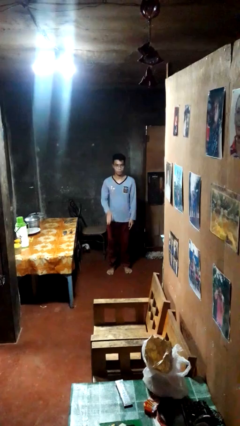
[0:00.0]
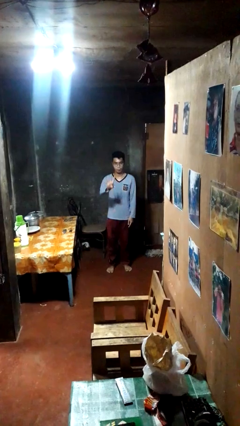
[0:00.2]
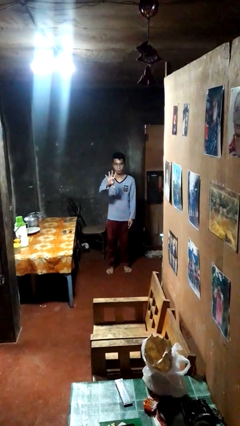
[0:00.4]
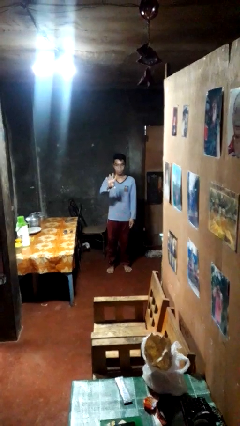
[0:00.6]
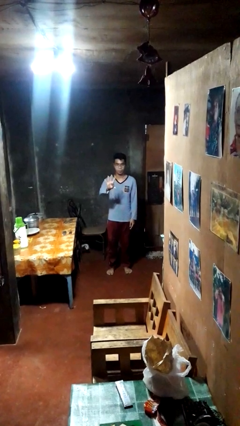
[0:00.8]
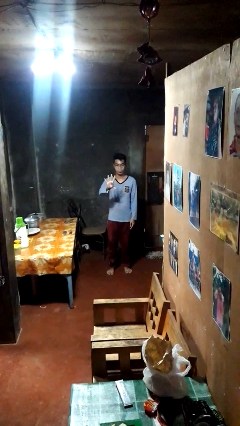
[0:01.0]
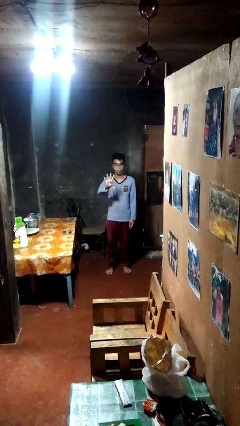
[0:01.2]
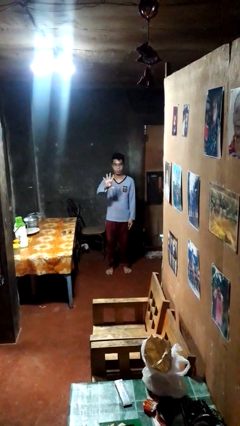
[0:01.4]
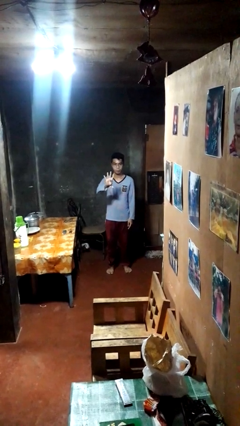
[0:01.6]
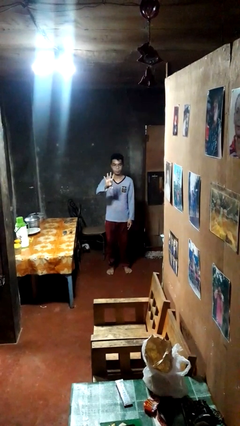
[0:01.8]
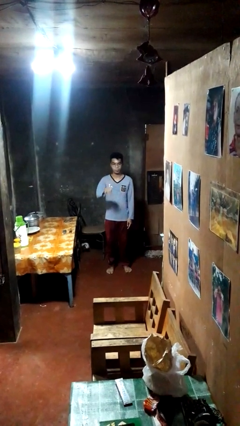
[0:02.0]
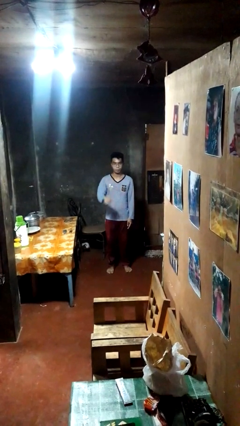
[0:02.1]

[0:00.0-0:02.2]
person gestures number four

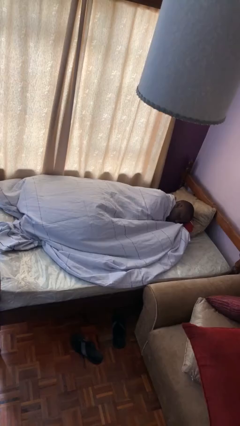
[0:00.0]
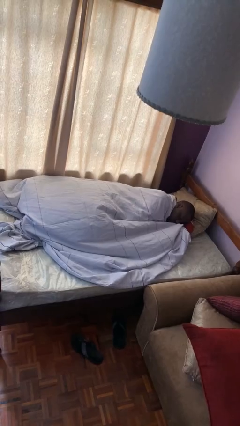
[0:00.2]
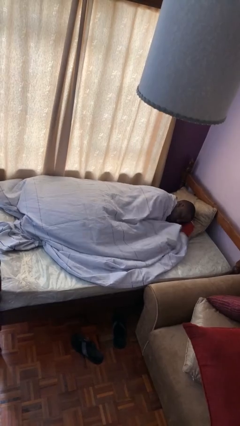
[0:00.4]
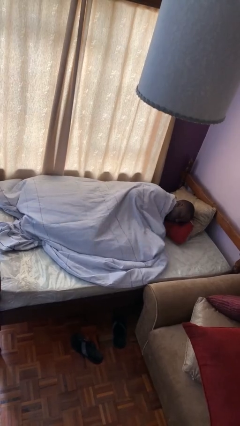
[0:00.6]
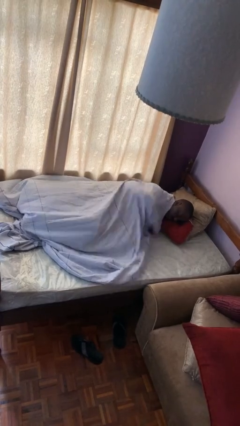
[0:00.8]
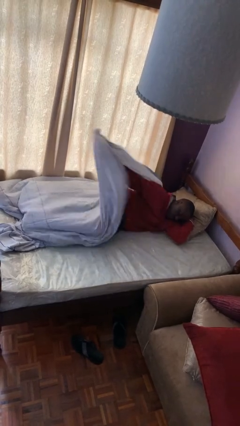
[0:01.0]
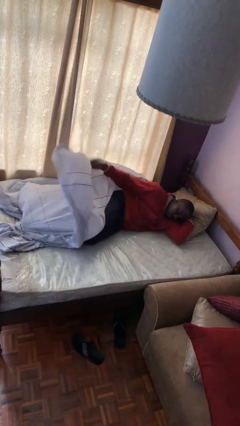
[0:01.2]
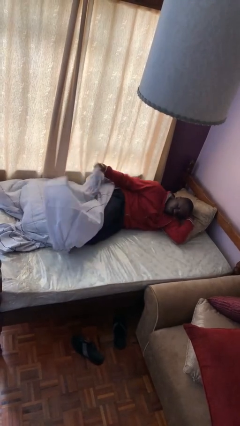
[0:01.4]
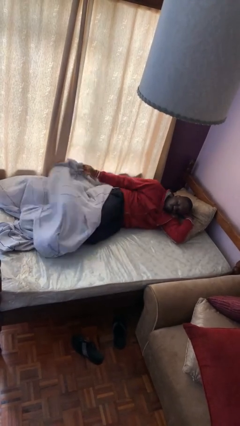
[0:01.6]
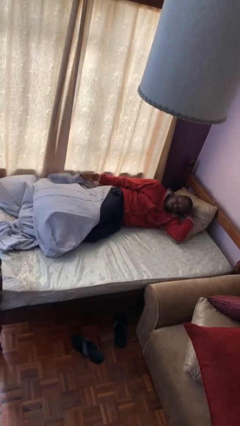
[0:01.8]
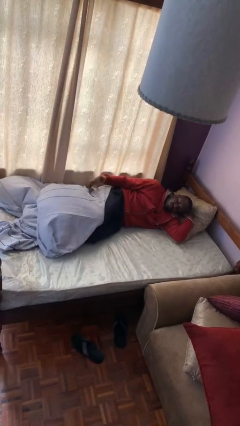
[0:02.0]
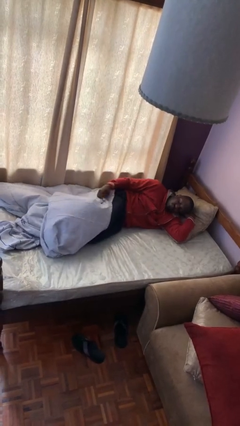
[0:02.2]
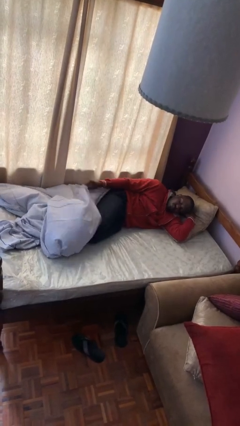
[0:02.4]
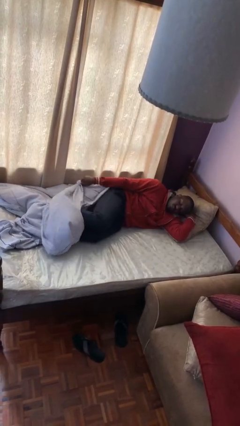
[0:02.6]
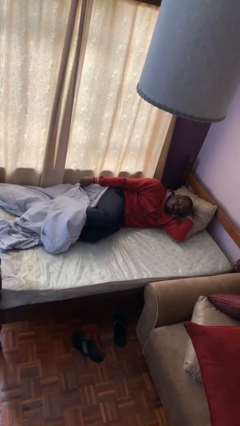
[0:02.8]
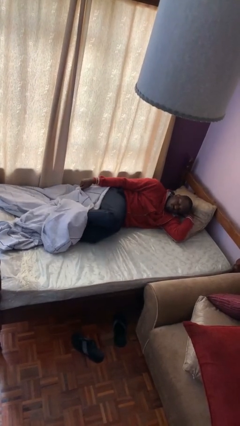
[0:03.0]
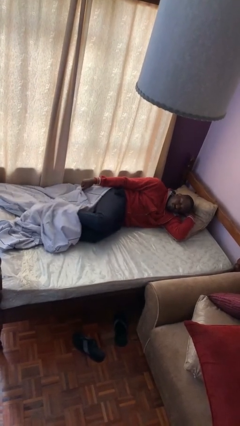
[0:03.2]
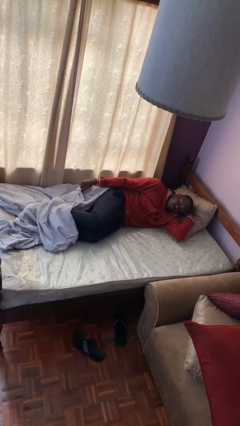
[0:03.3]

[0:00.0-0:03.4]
person uncovers with bedsheets

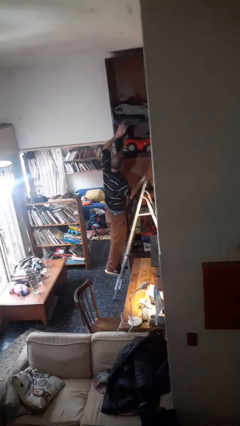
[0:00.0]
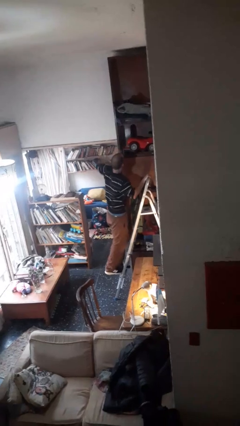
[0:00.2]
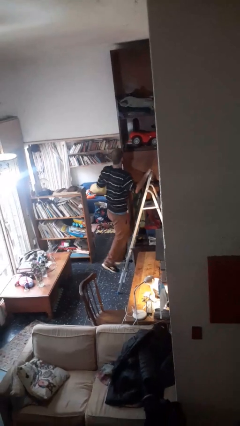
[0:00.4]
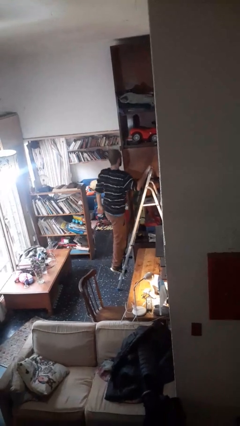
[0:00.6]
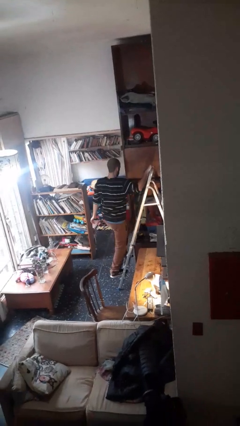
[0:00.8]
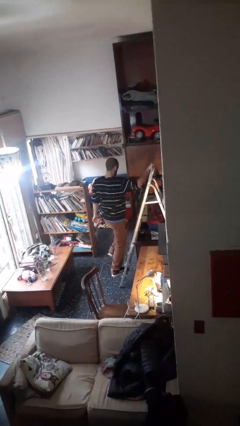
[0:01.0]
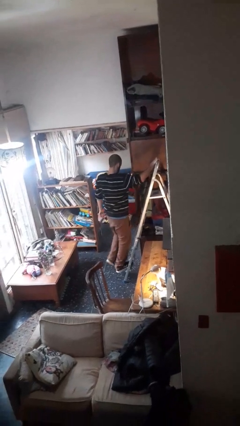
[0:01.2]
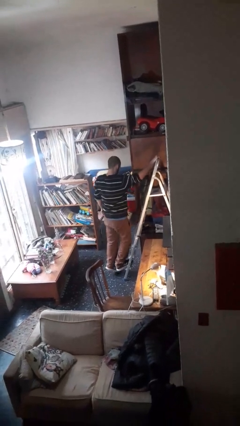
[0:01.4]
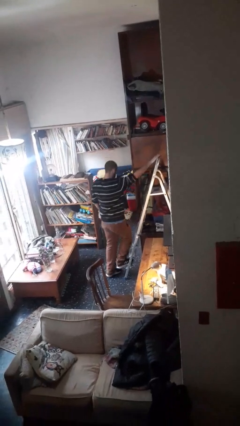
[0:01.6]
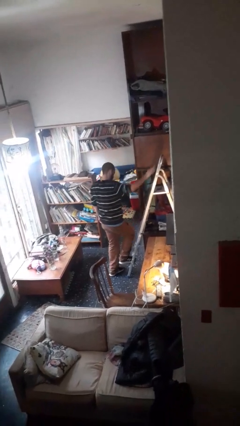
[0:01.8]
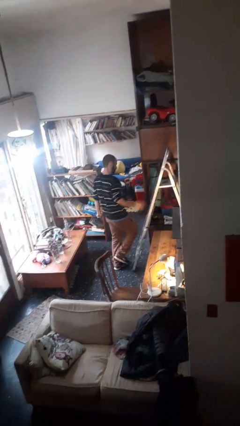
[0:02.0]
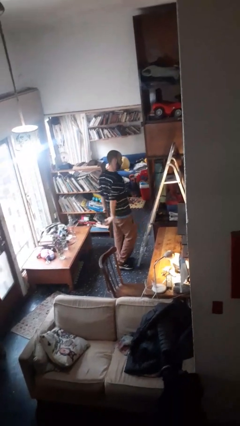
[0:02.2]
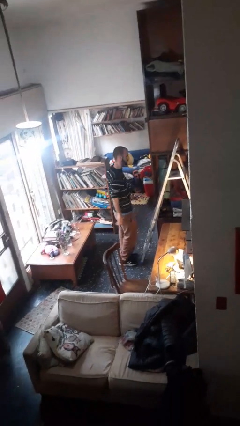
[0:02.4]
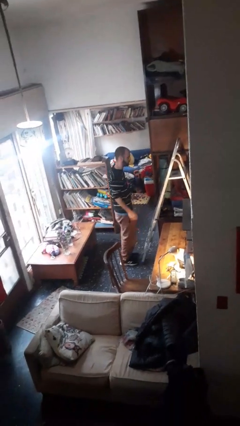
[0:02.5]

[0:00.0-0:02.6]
person climbs down ladder

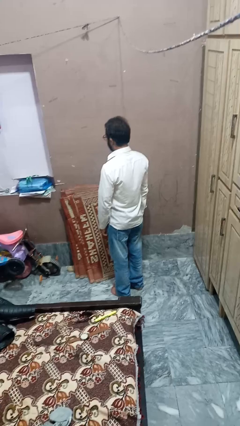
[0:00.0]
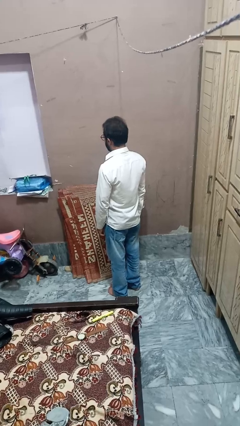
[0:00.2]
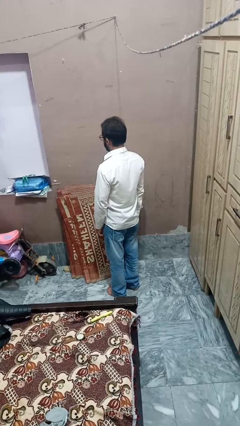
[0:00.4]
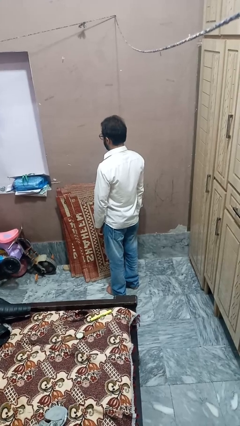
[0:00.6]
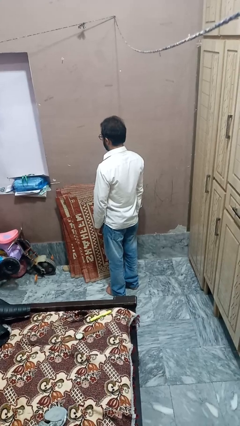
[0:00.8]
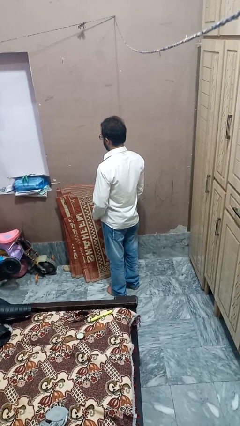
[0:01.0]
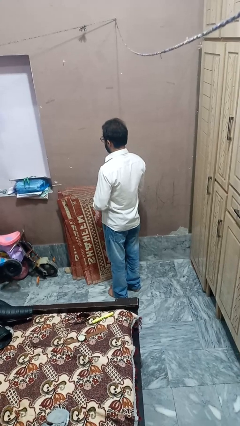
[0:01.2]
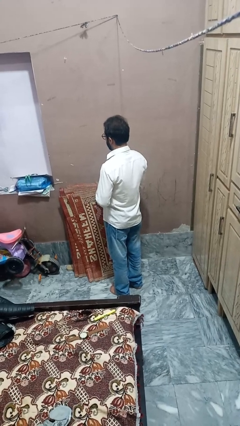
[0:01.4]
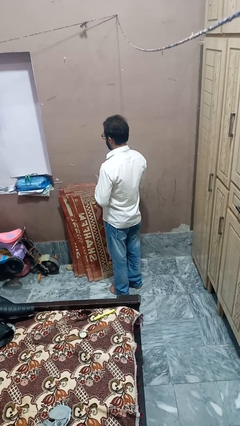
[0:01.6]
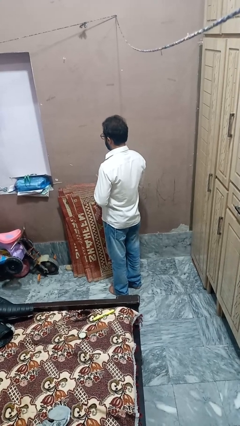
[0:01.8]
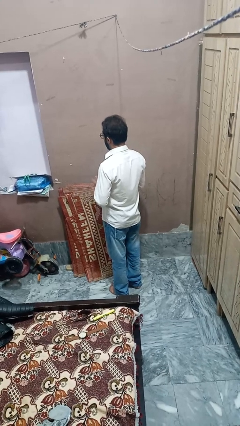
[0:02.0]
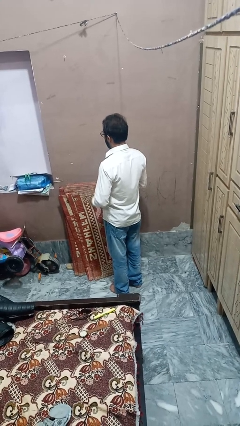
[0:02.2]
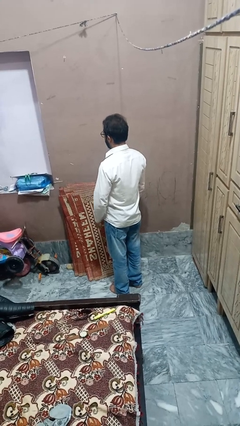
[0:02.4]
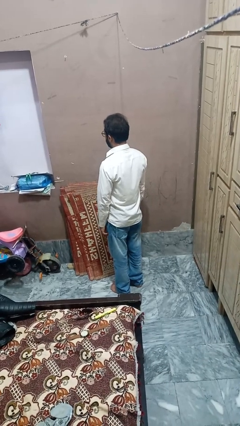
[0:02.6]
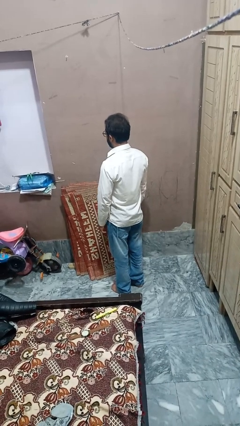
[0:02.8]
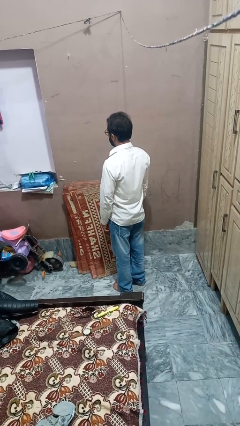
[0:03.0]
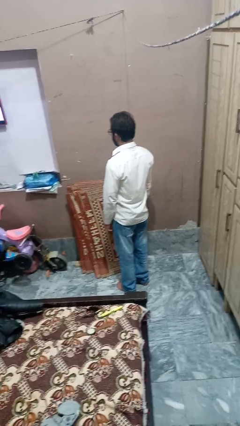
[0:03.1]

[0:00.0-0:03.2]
person takes off ring

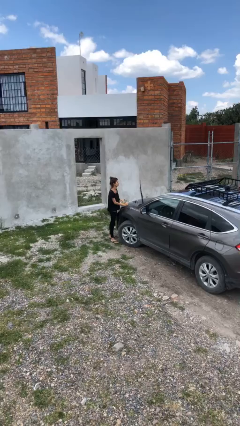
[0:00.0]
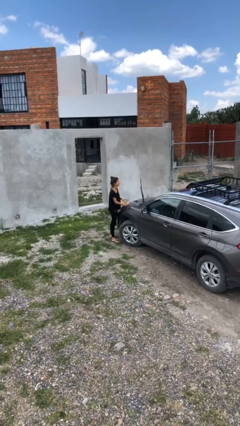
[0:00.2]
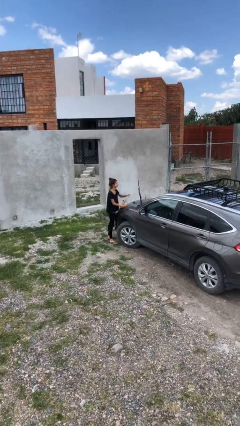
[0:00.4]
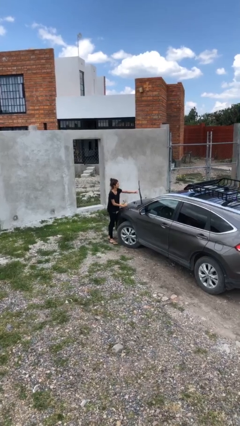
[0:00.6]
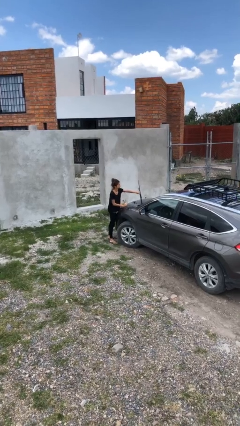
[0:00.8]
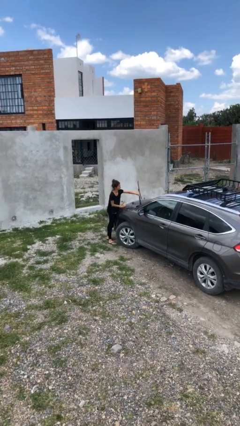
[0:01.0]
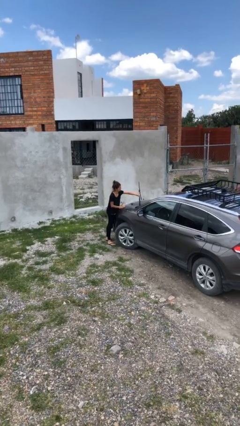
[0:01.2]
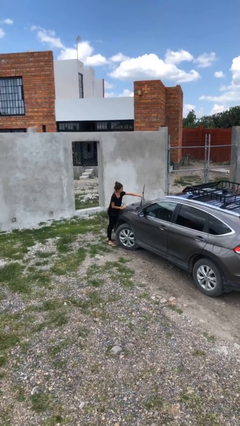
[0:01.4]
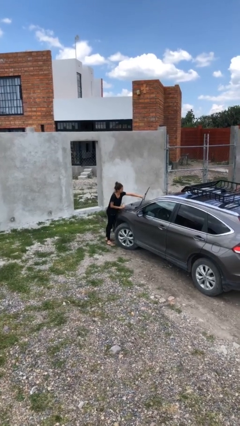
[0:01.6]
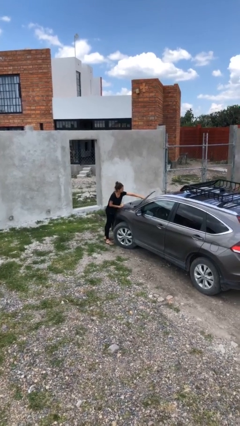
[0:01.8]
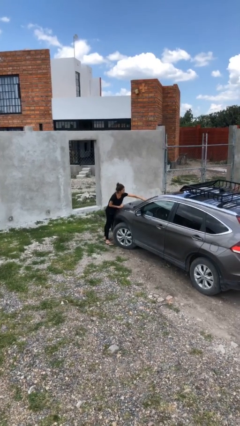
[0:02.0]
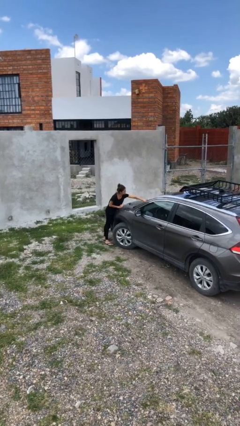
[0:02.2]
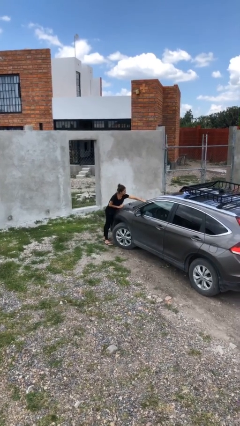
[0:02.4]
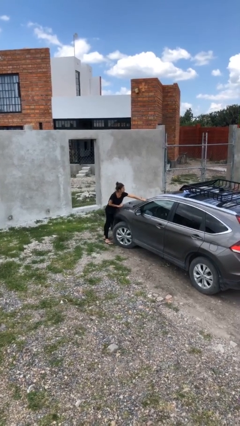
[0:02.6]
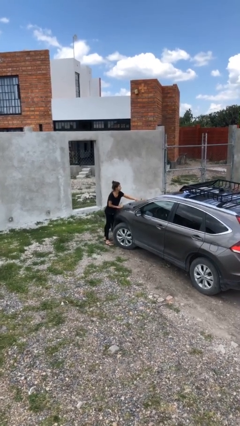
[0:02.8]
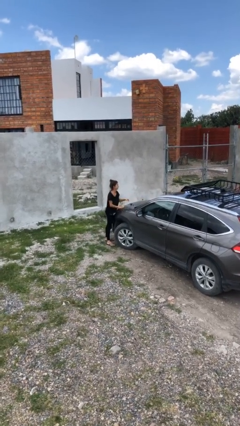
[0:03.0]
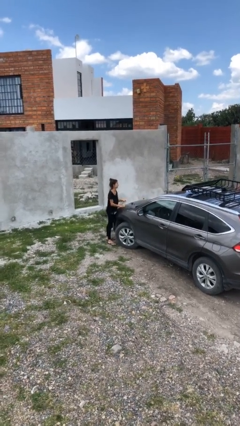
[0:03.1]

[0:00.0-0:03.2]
person flips down car wipers

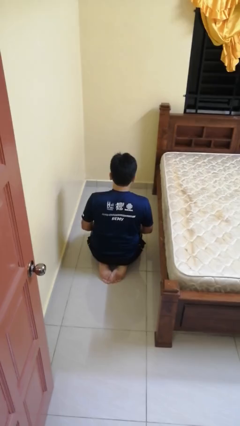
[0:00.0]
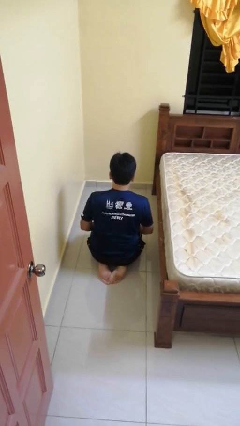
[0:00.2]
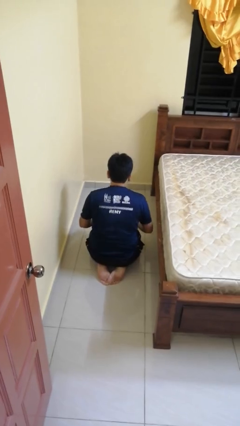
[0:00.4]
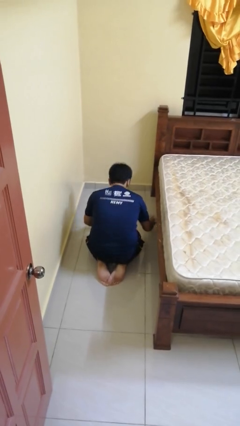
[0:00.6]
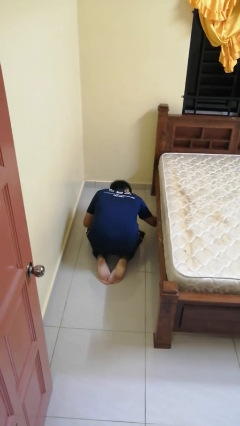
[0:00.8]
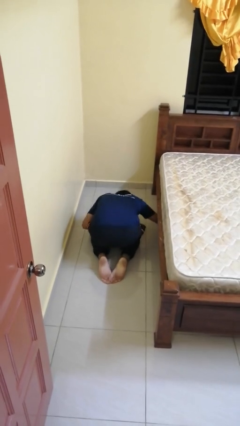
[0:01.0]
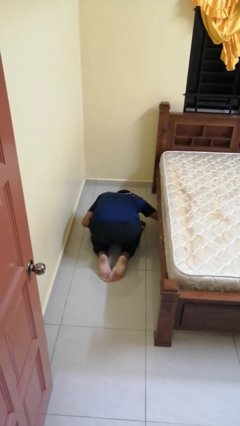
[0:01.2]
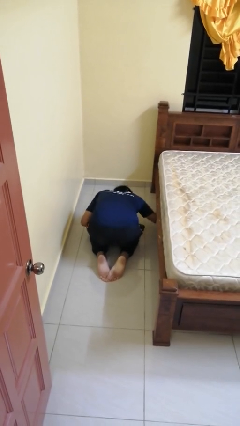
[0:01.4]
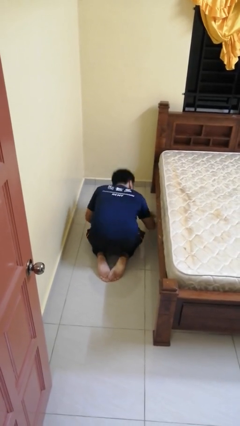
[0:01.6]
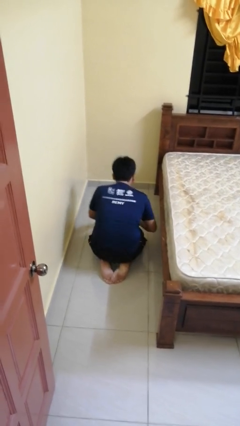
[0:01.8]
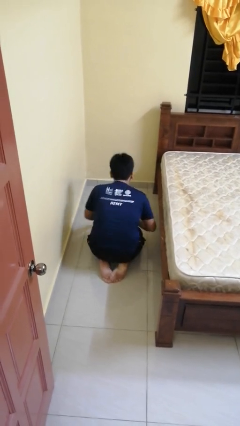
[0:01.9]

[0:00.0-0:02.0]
person searches under bed

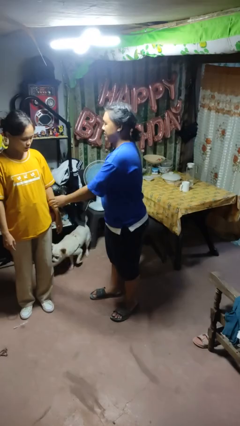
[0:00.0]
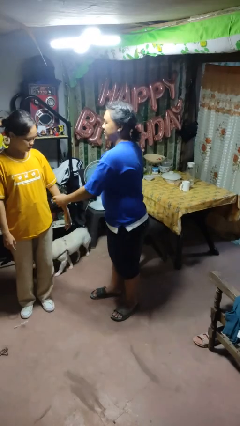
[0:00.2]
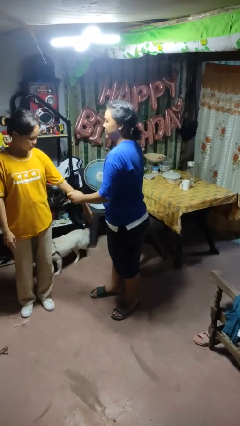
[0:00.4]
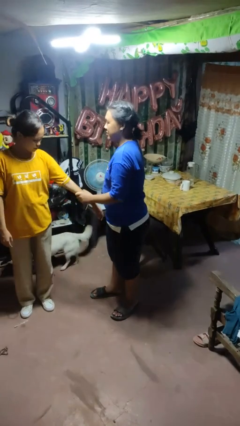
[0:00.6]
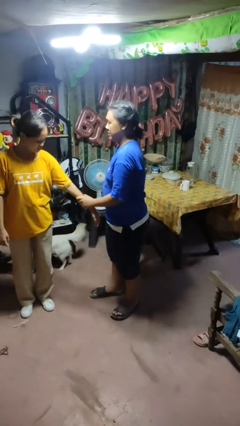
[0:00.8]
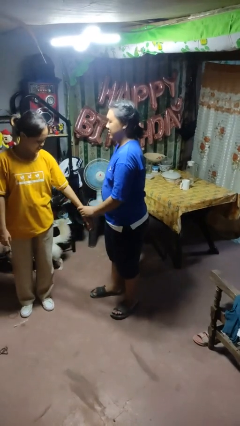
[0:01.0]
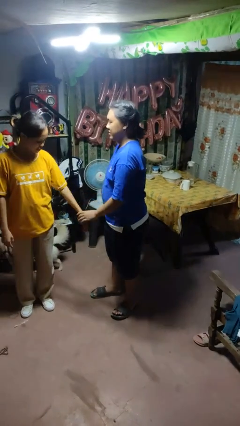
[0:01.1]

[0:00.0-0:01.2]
person grabs person by forearm
